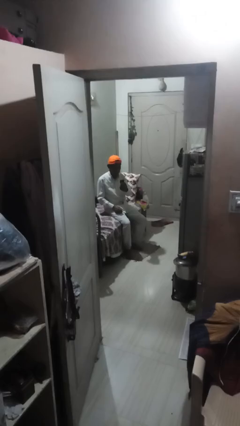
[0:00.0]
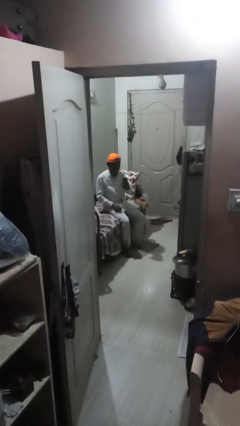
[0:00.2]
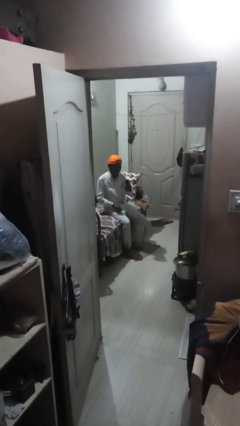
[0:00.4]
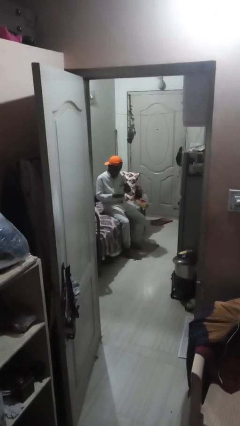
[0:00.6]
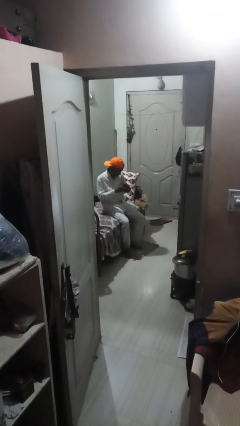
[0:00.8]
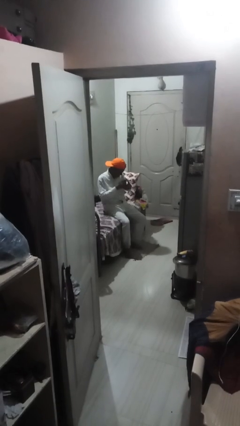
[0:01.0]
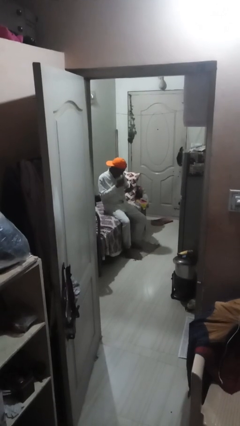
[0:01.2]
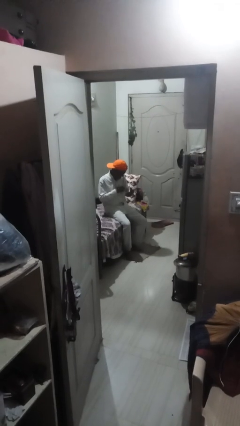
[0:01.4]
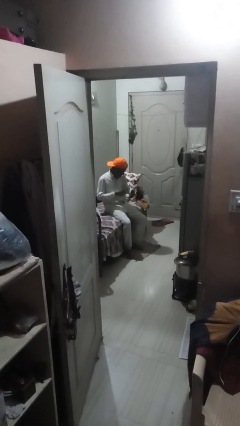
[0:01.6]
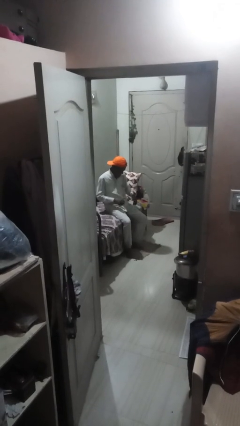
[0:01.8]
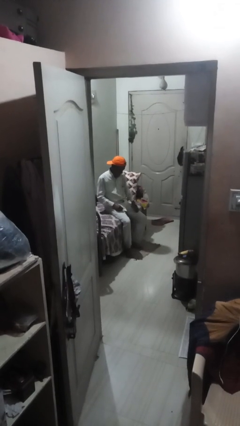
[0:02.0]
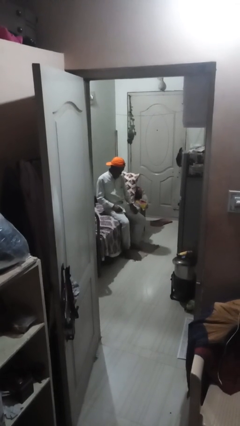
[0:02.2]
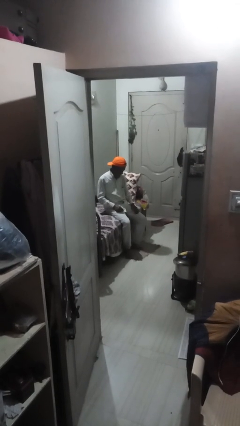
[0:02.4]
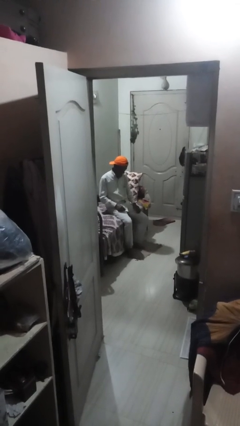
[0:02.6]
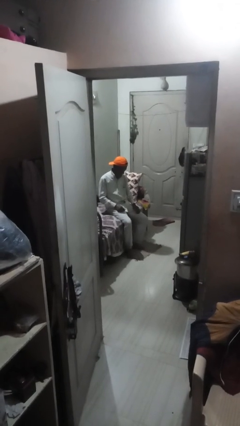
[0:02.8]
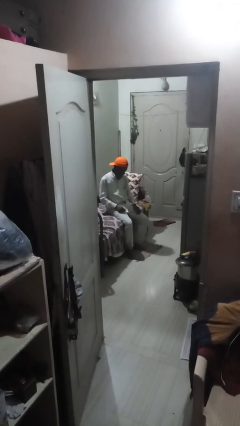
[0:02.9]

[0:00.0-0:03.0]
person puts phone into pocket

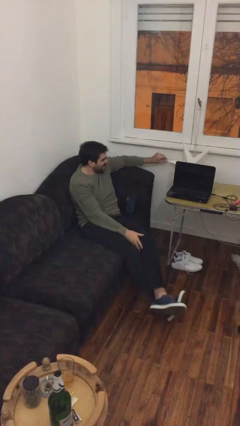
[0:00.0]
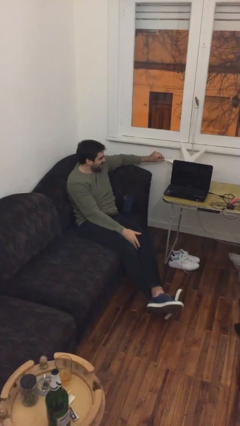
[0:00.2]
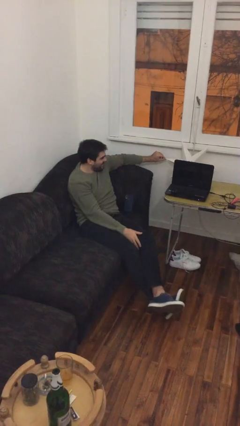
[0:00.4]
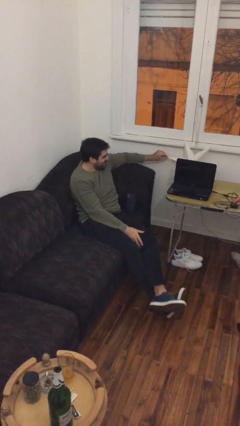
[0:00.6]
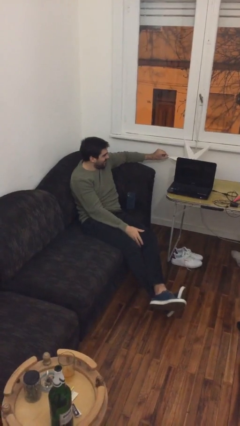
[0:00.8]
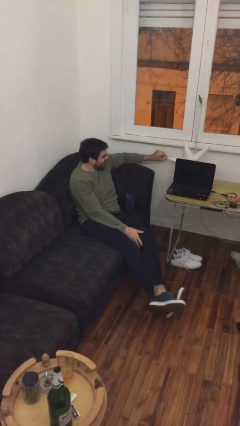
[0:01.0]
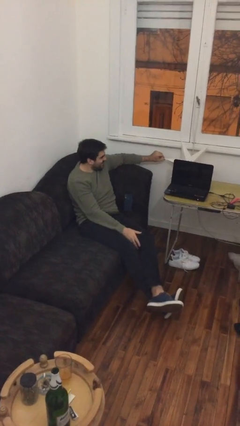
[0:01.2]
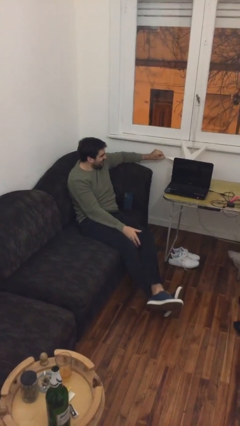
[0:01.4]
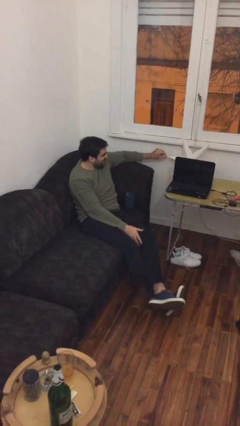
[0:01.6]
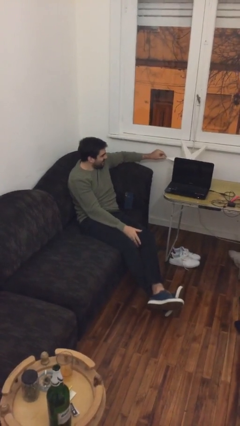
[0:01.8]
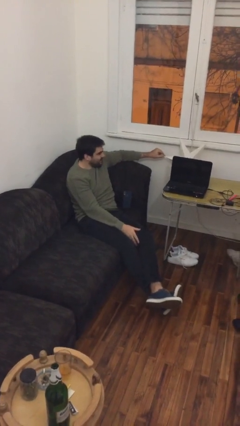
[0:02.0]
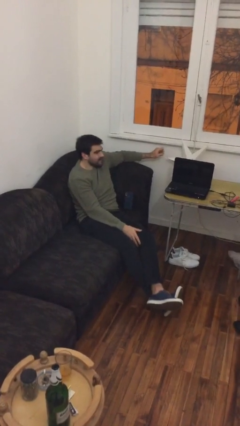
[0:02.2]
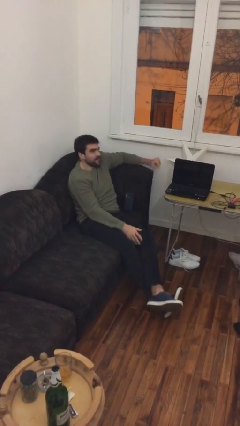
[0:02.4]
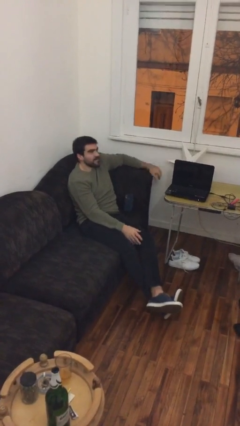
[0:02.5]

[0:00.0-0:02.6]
person shakes hand

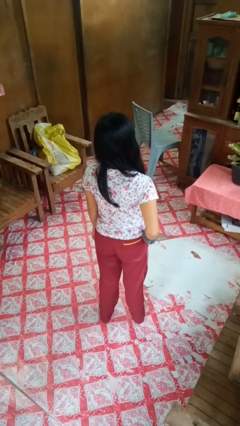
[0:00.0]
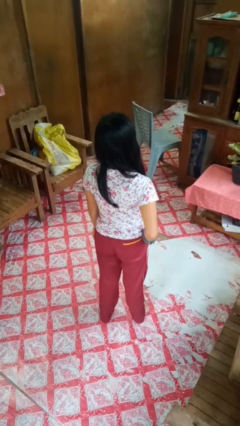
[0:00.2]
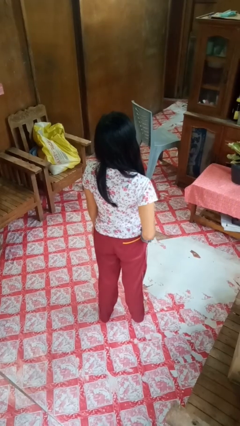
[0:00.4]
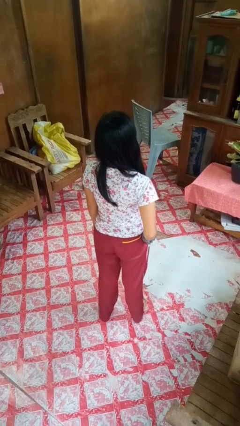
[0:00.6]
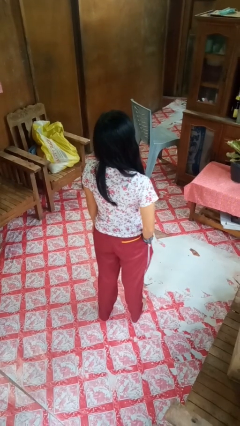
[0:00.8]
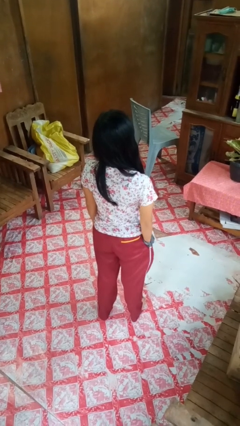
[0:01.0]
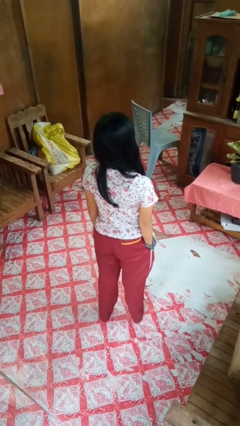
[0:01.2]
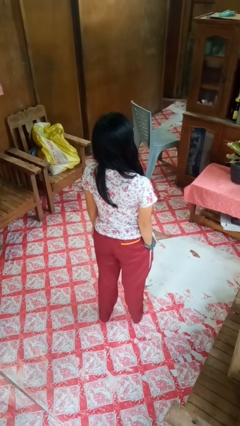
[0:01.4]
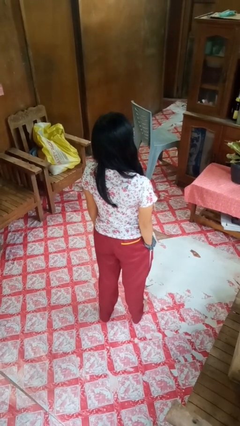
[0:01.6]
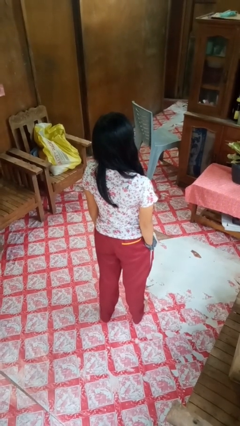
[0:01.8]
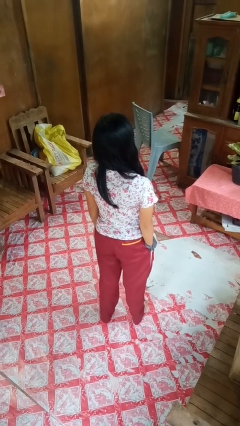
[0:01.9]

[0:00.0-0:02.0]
person puts hands in back pockets

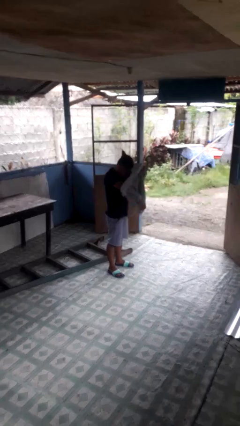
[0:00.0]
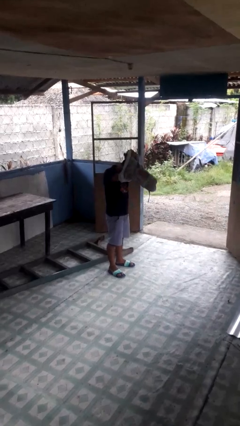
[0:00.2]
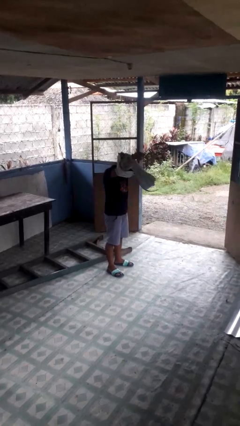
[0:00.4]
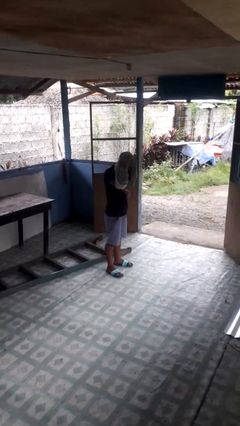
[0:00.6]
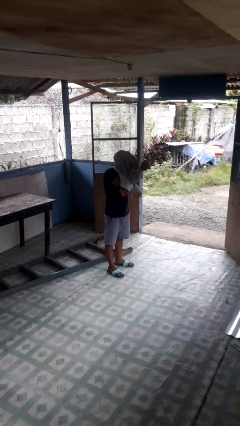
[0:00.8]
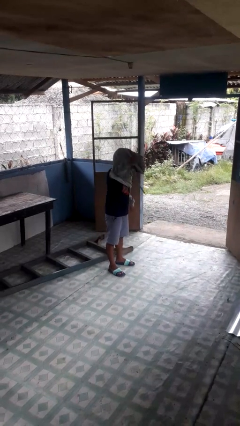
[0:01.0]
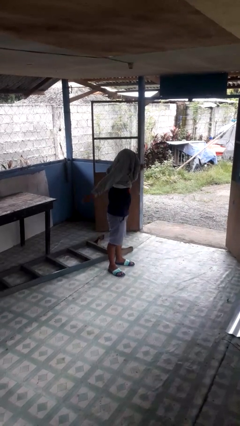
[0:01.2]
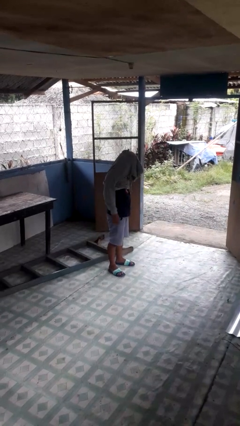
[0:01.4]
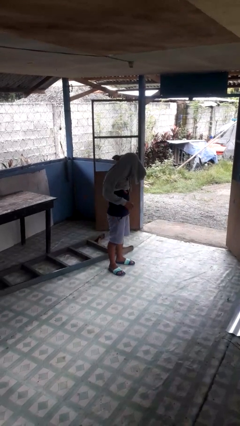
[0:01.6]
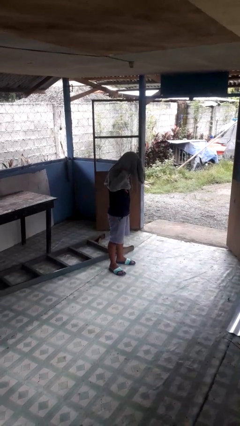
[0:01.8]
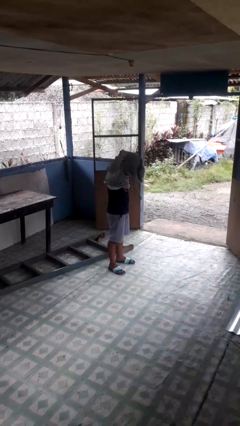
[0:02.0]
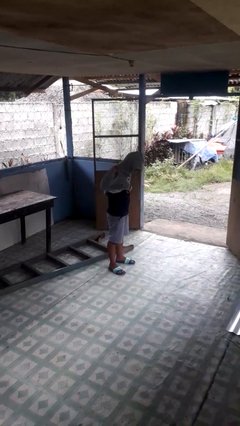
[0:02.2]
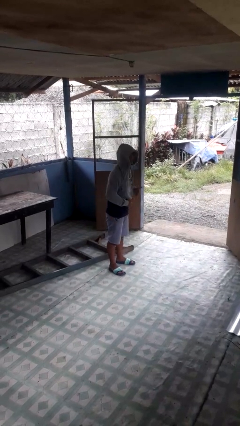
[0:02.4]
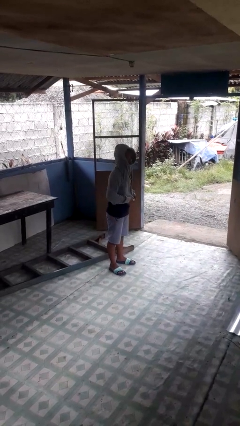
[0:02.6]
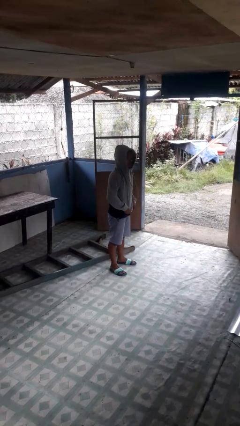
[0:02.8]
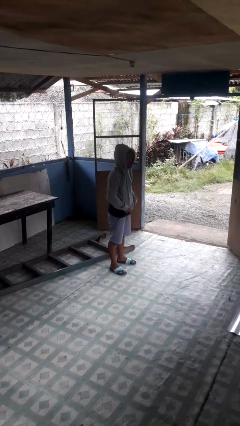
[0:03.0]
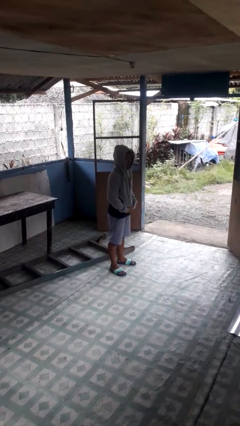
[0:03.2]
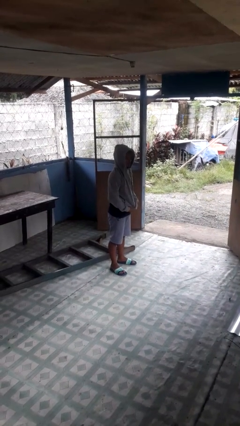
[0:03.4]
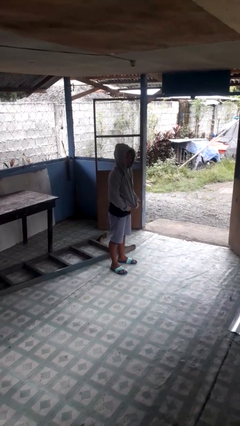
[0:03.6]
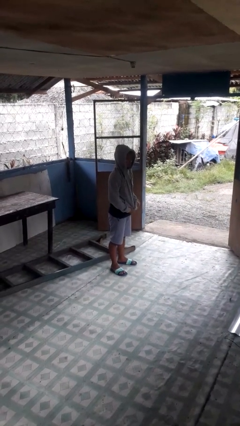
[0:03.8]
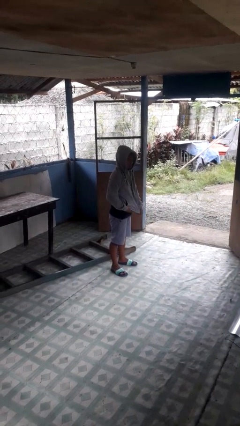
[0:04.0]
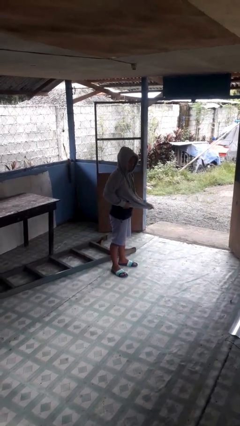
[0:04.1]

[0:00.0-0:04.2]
person puts on hoodie

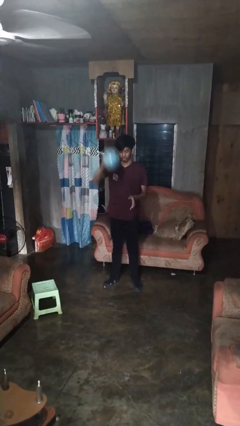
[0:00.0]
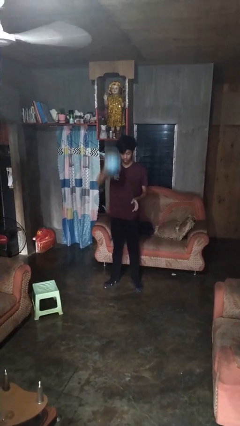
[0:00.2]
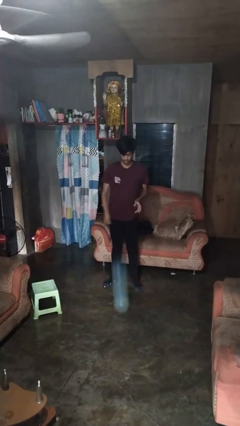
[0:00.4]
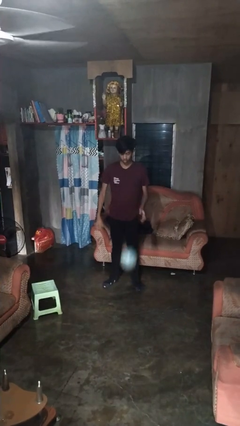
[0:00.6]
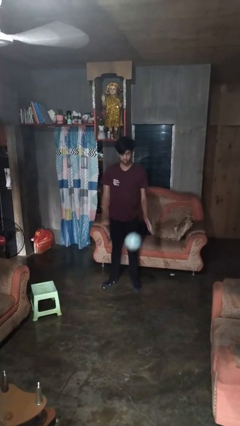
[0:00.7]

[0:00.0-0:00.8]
person bounces ball on floor

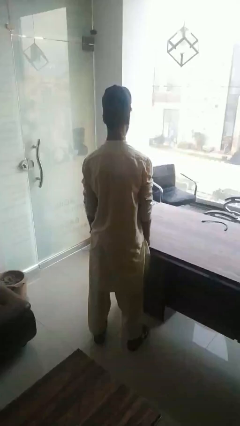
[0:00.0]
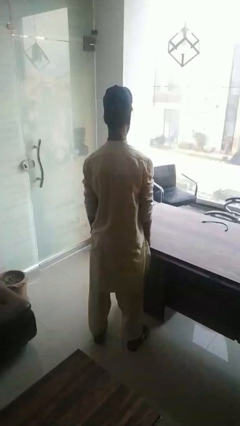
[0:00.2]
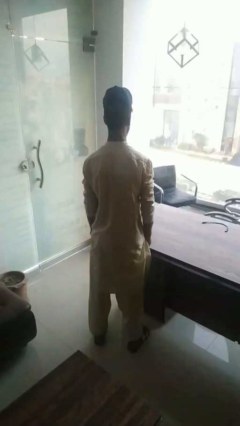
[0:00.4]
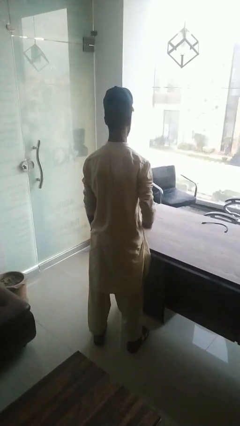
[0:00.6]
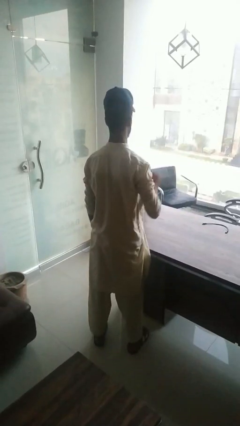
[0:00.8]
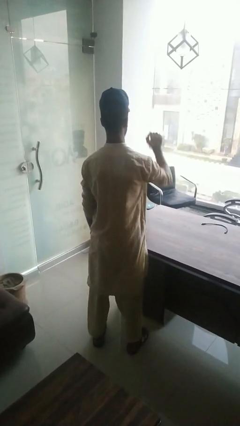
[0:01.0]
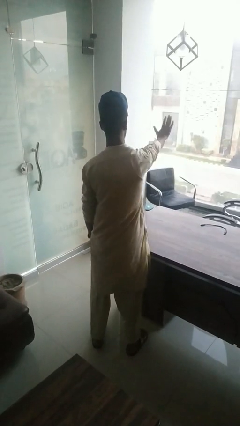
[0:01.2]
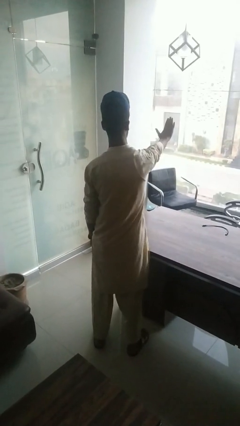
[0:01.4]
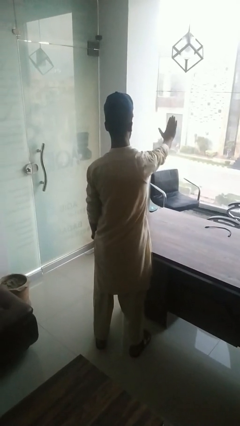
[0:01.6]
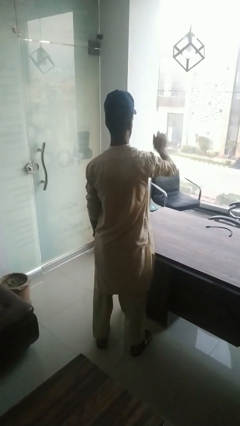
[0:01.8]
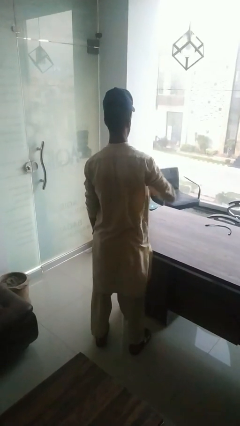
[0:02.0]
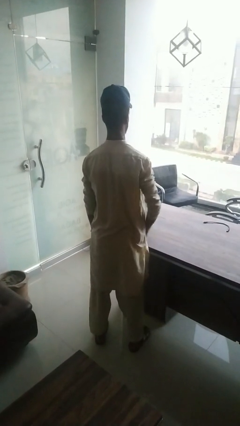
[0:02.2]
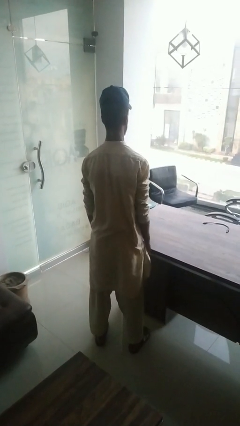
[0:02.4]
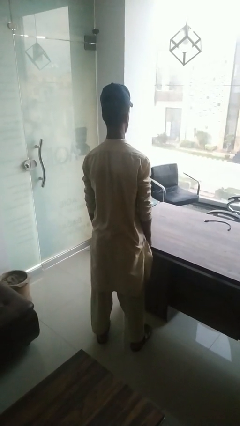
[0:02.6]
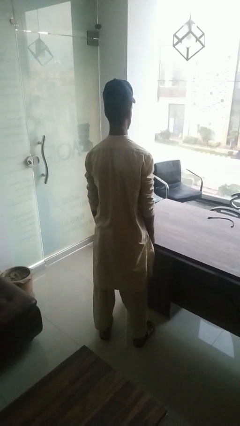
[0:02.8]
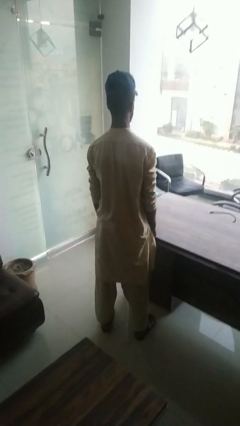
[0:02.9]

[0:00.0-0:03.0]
person gestures stop

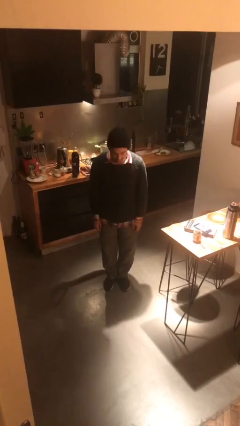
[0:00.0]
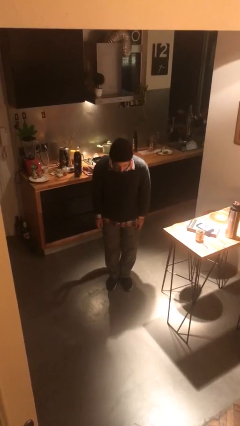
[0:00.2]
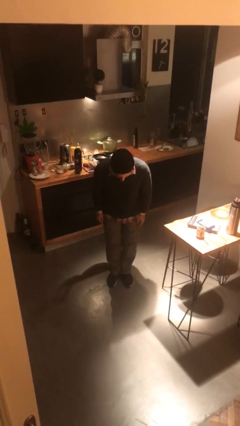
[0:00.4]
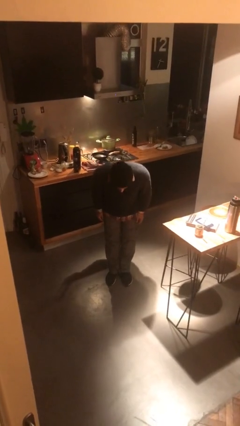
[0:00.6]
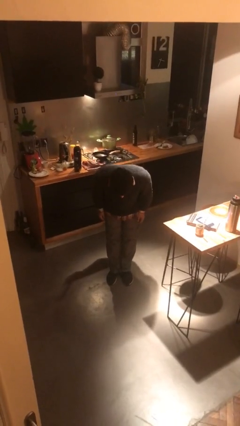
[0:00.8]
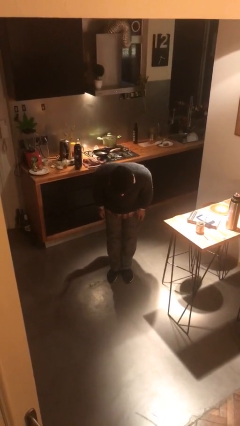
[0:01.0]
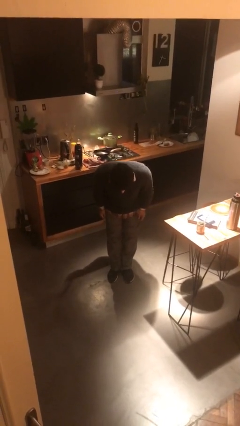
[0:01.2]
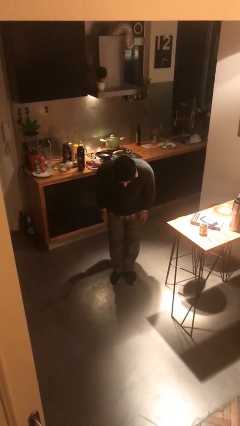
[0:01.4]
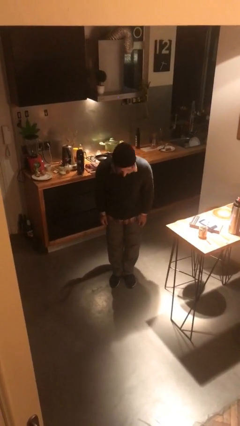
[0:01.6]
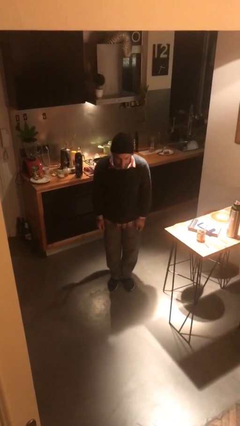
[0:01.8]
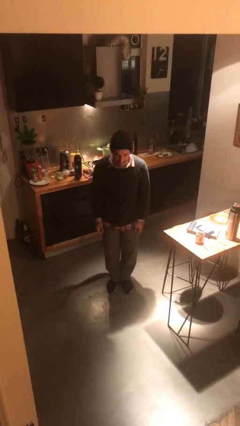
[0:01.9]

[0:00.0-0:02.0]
person bows
